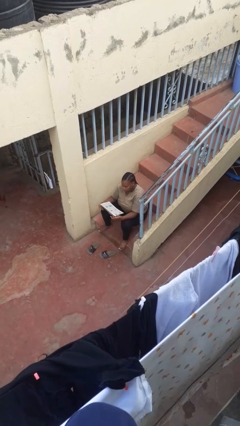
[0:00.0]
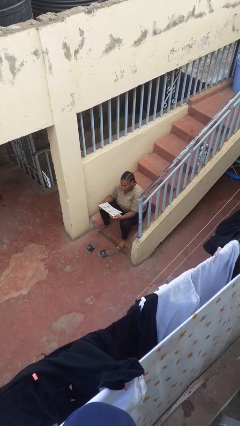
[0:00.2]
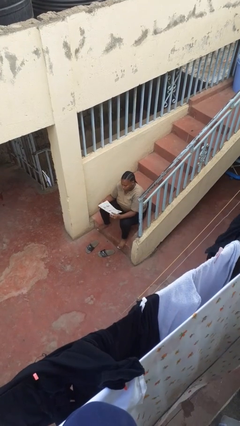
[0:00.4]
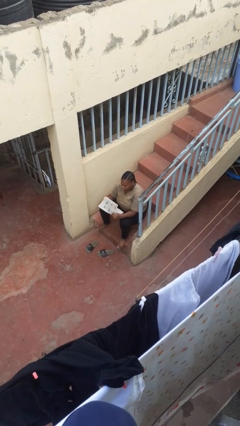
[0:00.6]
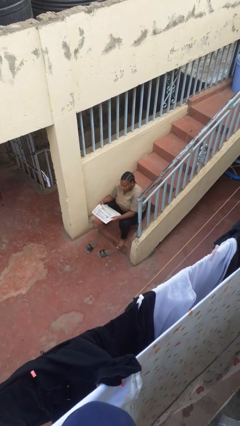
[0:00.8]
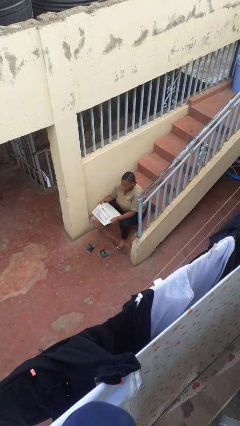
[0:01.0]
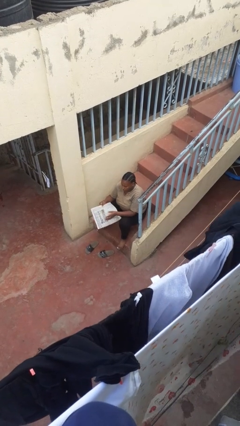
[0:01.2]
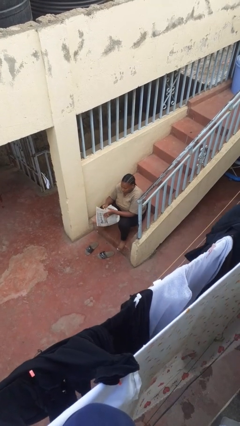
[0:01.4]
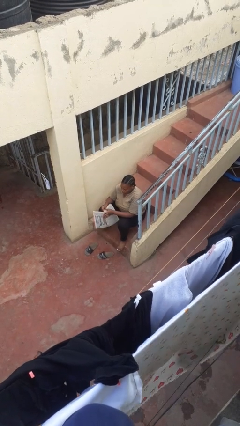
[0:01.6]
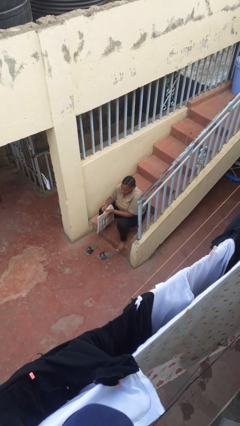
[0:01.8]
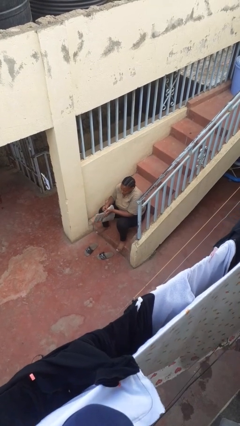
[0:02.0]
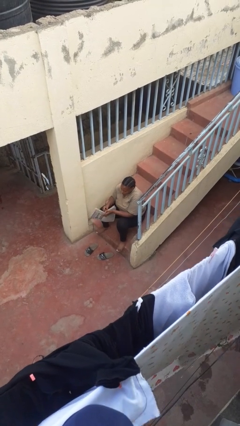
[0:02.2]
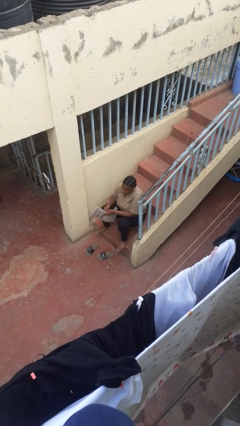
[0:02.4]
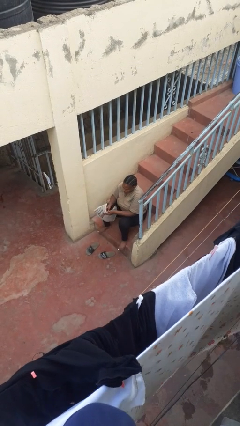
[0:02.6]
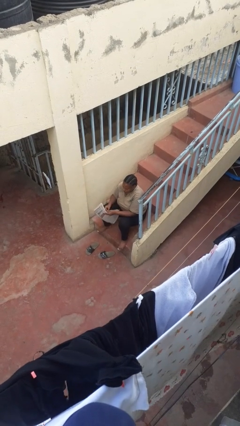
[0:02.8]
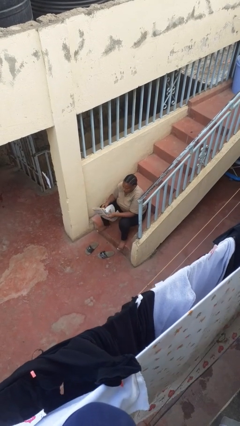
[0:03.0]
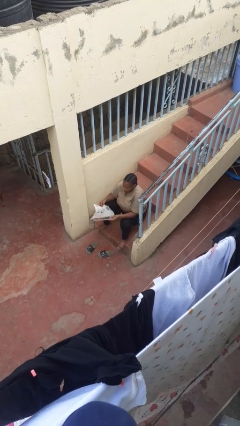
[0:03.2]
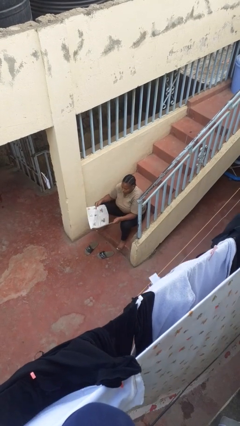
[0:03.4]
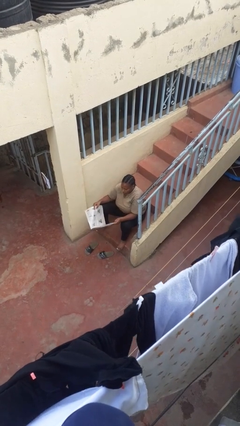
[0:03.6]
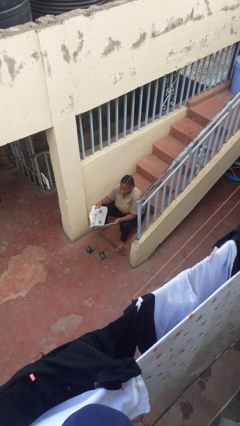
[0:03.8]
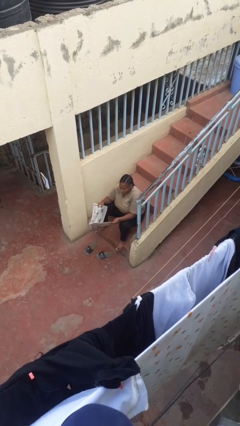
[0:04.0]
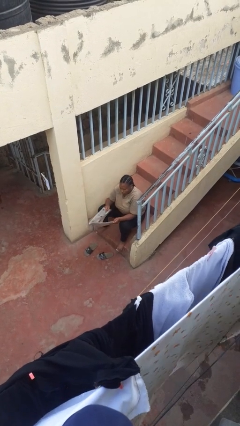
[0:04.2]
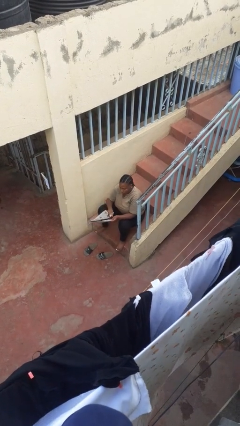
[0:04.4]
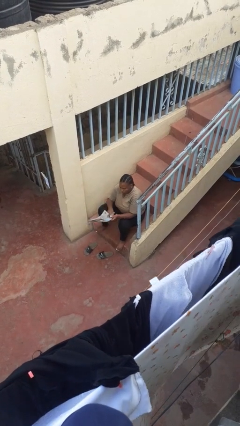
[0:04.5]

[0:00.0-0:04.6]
person reads newspaper

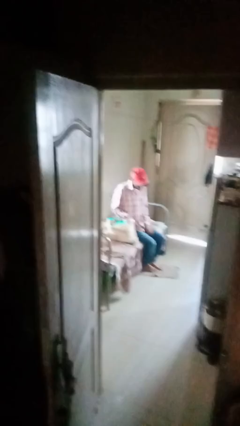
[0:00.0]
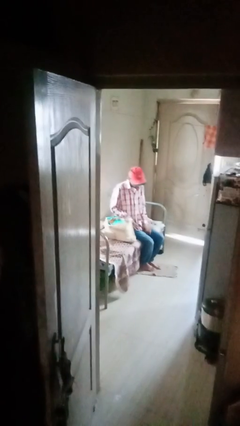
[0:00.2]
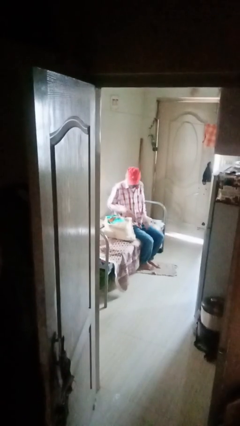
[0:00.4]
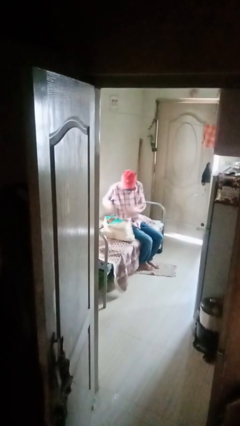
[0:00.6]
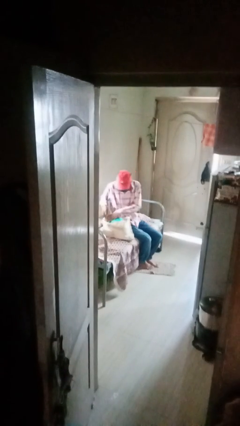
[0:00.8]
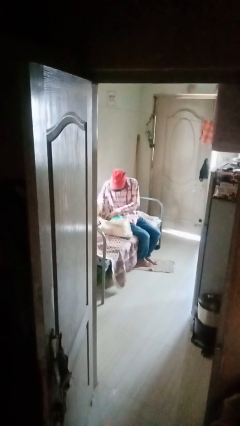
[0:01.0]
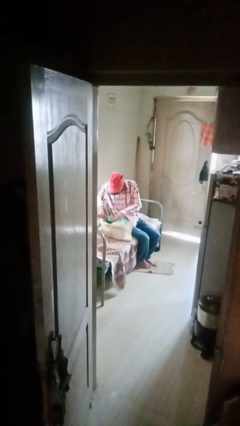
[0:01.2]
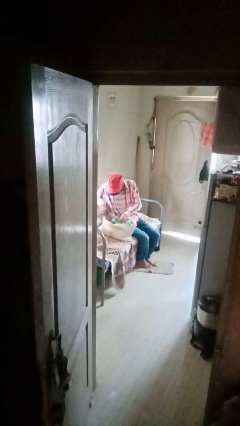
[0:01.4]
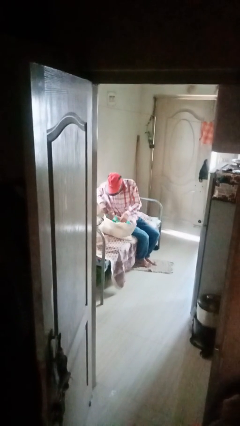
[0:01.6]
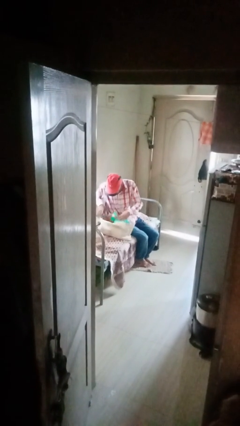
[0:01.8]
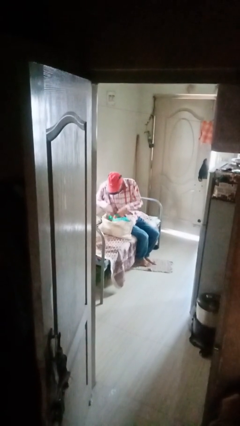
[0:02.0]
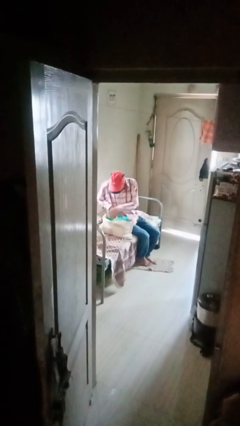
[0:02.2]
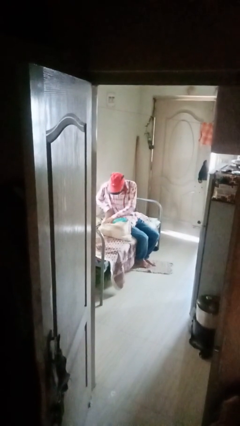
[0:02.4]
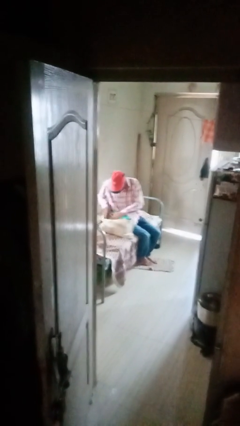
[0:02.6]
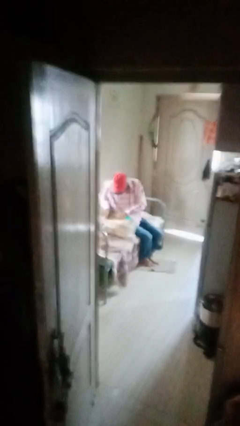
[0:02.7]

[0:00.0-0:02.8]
person searches in bag

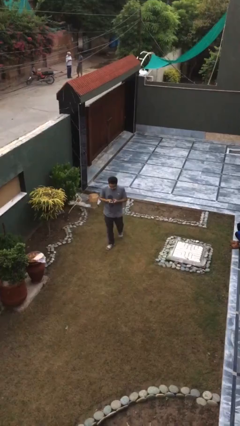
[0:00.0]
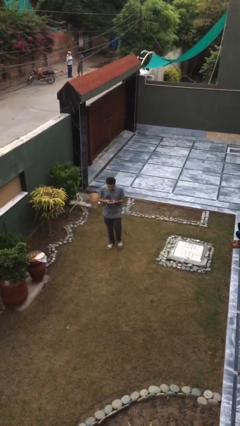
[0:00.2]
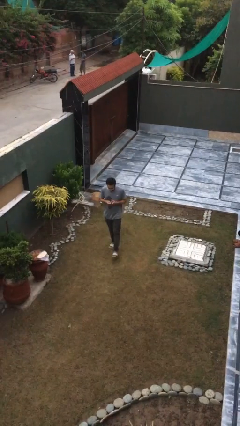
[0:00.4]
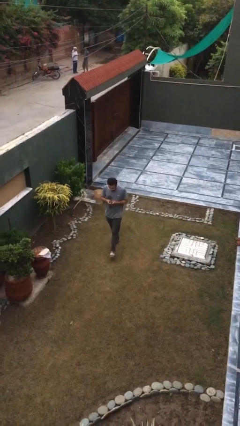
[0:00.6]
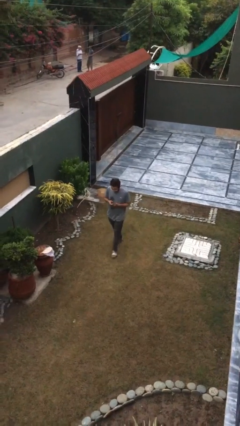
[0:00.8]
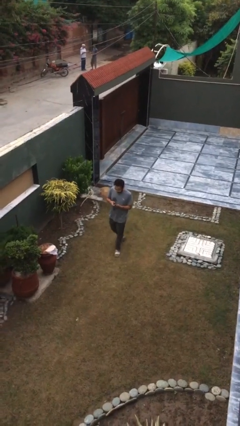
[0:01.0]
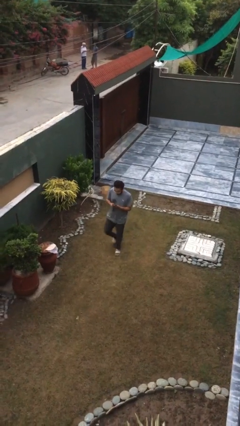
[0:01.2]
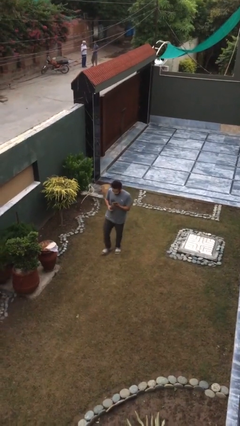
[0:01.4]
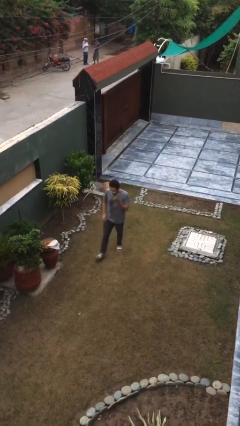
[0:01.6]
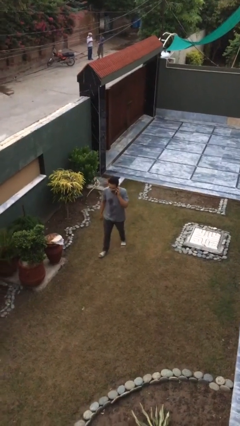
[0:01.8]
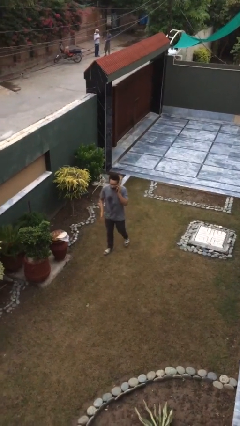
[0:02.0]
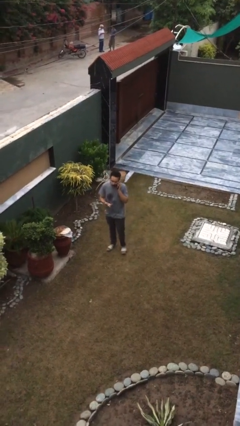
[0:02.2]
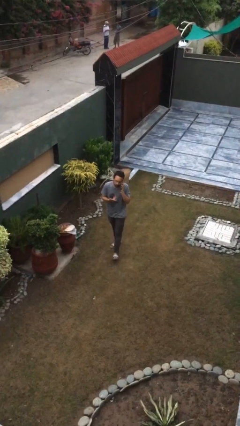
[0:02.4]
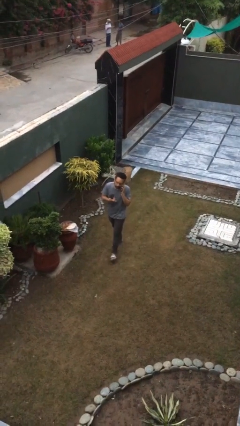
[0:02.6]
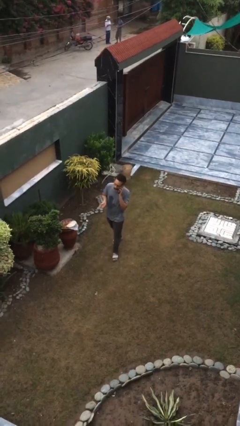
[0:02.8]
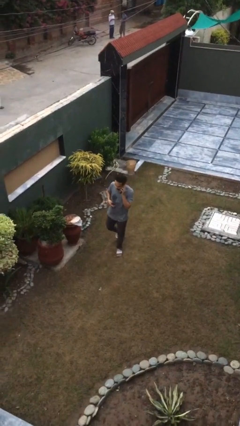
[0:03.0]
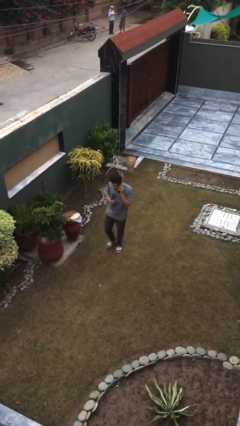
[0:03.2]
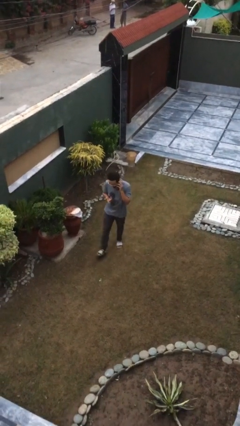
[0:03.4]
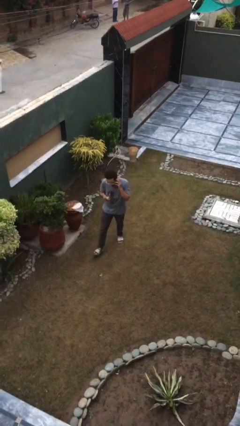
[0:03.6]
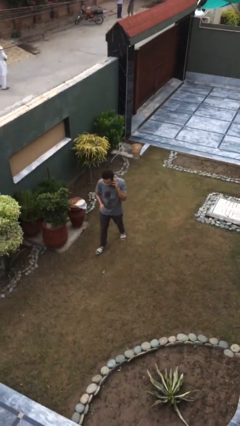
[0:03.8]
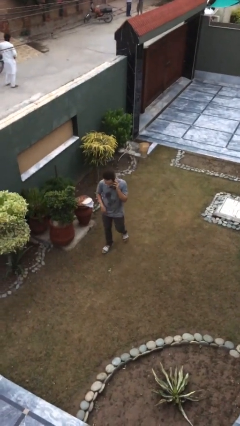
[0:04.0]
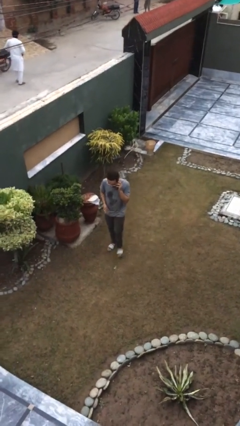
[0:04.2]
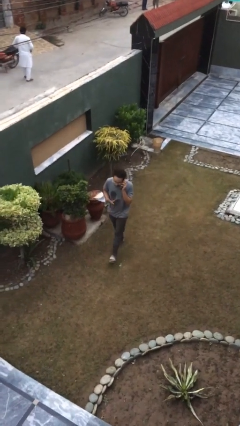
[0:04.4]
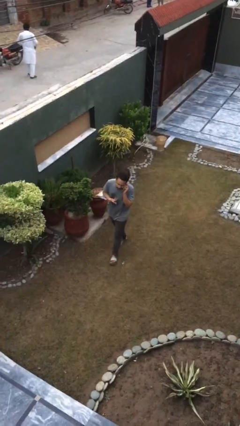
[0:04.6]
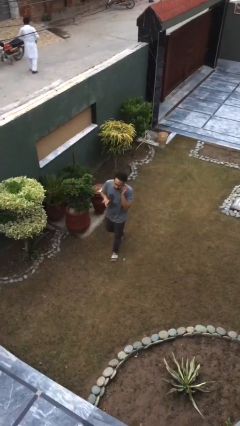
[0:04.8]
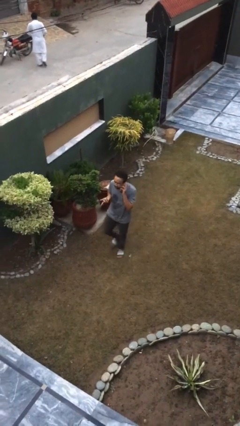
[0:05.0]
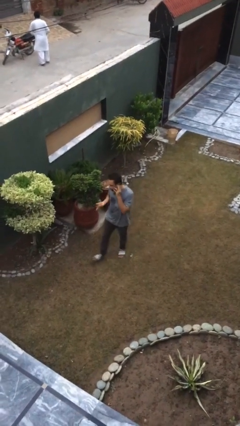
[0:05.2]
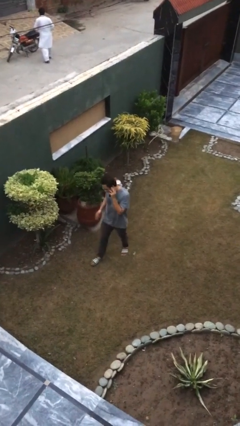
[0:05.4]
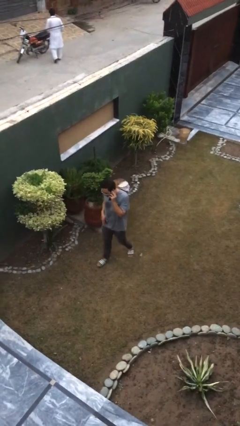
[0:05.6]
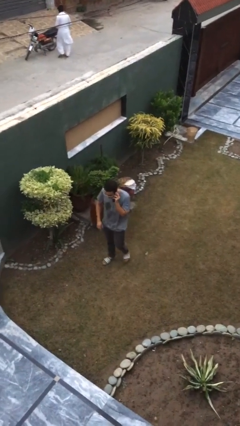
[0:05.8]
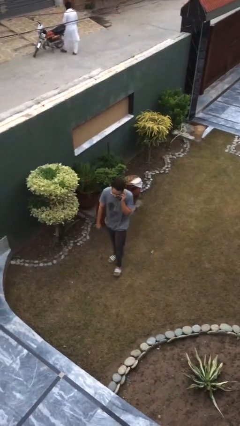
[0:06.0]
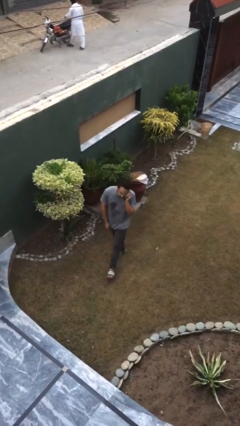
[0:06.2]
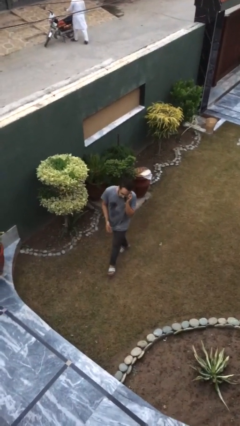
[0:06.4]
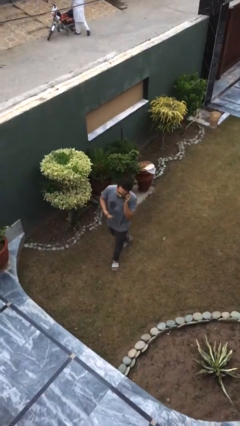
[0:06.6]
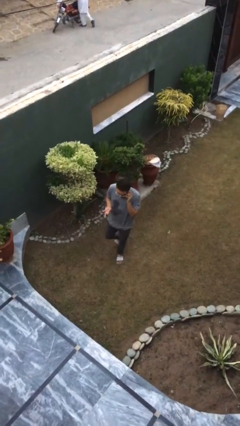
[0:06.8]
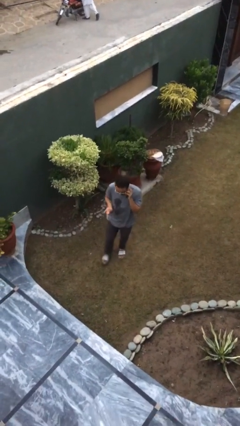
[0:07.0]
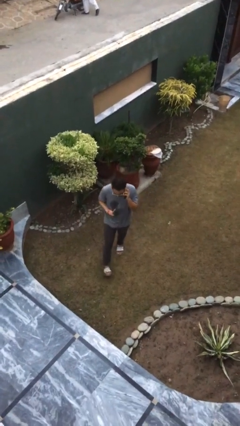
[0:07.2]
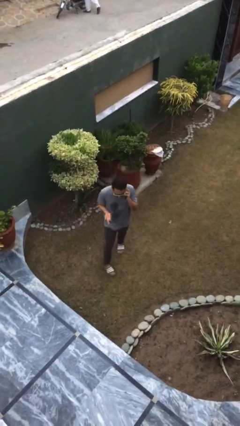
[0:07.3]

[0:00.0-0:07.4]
person talks on phone

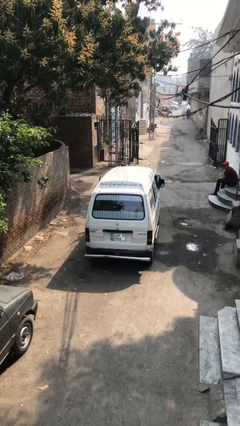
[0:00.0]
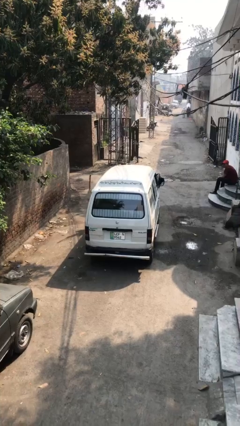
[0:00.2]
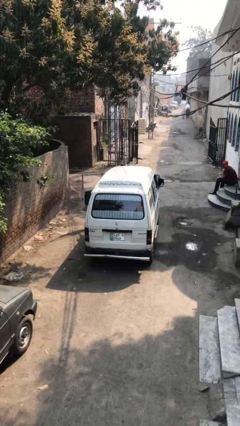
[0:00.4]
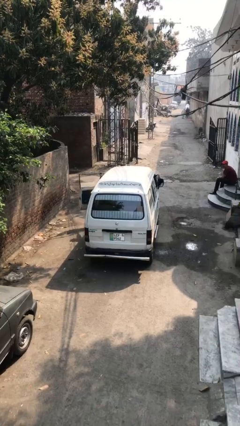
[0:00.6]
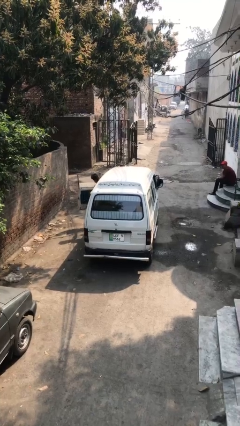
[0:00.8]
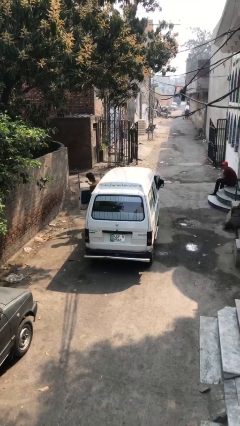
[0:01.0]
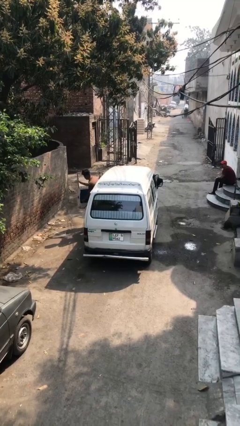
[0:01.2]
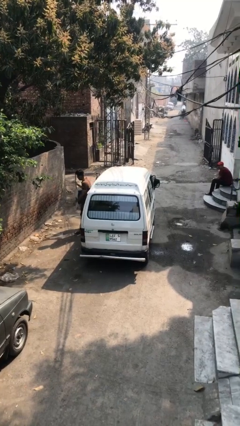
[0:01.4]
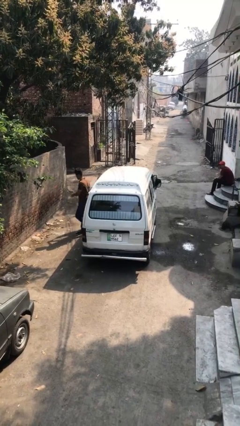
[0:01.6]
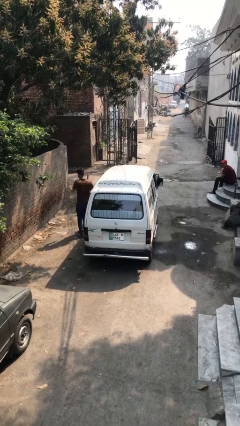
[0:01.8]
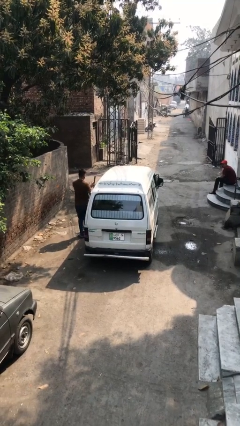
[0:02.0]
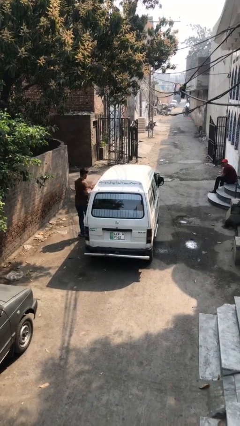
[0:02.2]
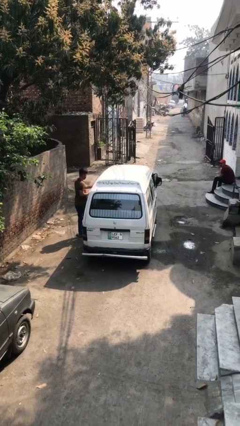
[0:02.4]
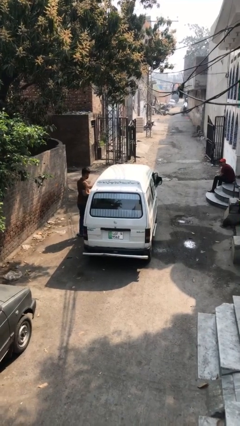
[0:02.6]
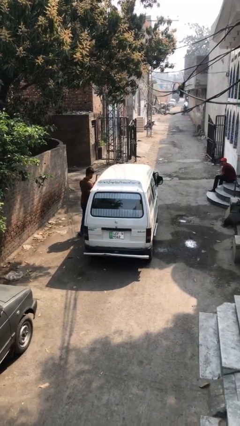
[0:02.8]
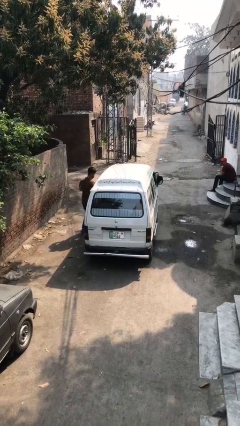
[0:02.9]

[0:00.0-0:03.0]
car drops off person
